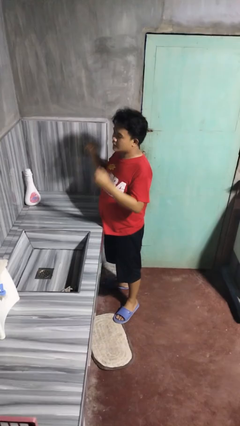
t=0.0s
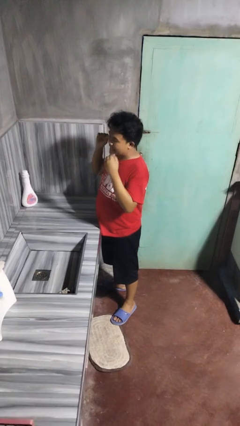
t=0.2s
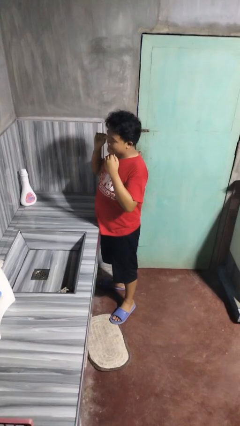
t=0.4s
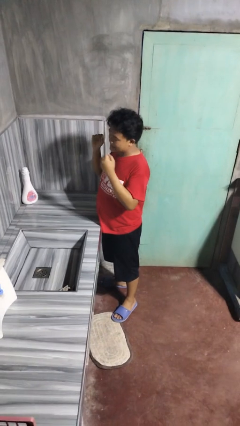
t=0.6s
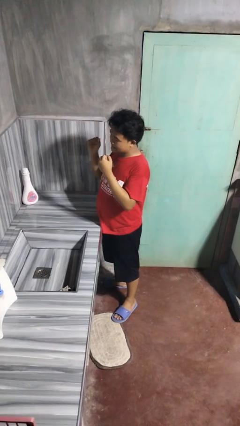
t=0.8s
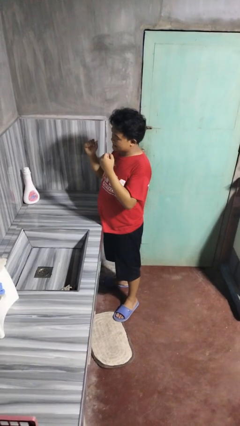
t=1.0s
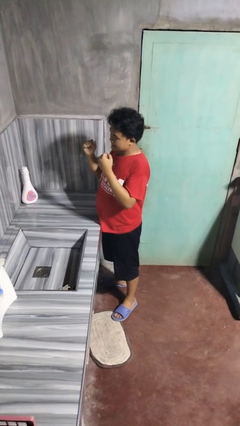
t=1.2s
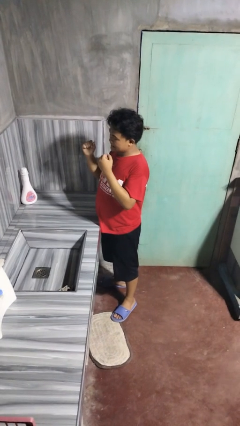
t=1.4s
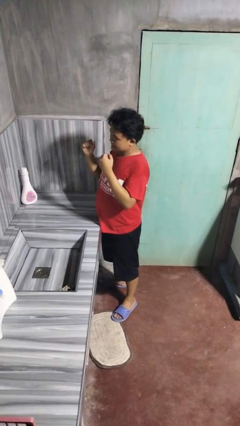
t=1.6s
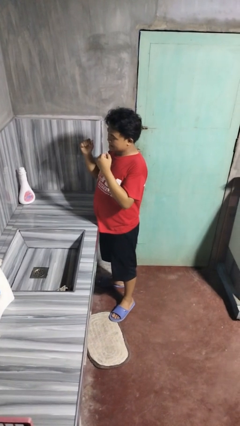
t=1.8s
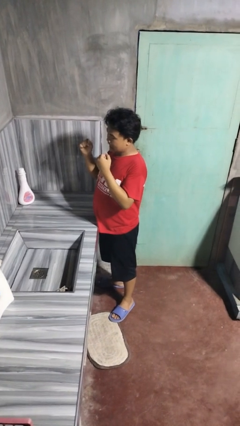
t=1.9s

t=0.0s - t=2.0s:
person flosses

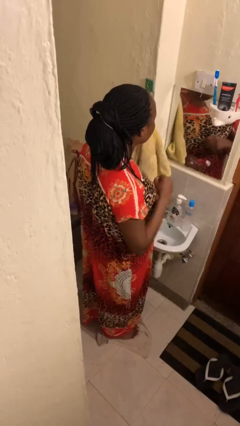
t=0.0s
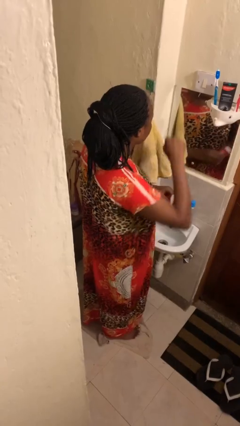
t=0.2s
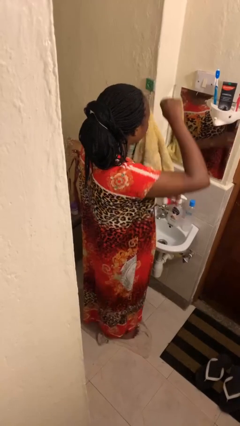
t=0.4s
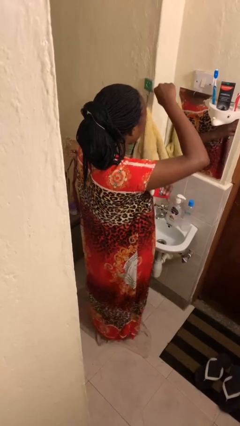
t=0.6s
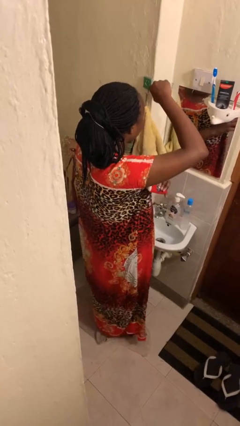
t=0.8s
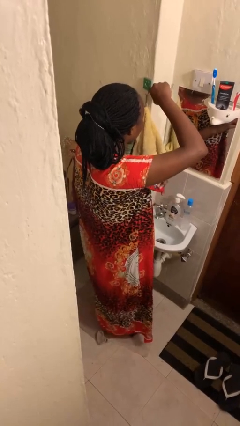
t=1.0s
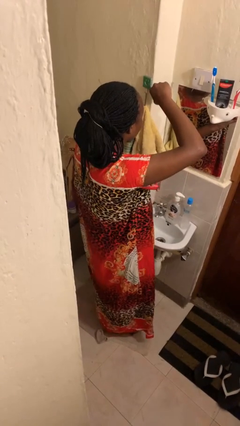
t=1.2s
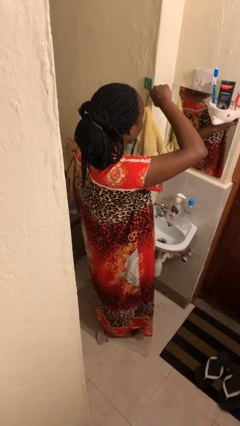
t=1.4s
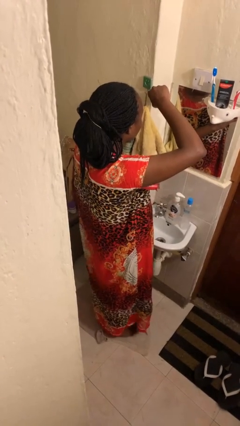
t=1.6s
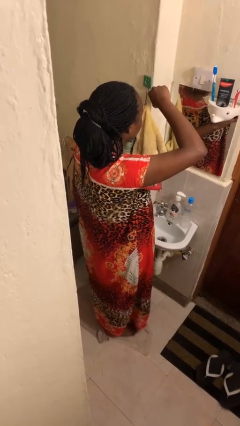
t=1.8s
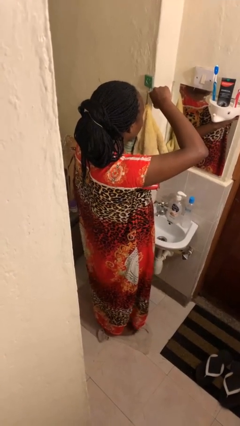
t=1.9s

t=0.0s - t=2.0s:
person applies deodorant

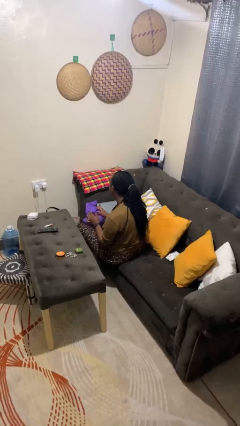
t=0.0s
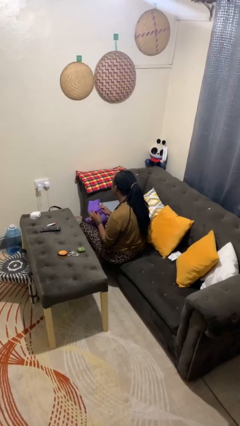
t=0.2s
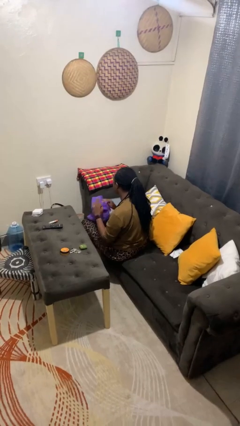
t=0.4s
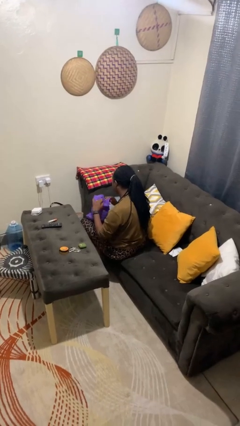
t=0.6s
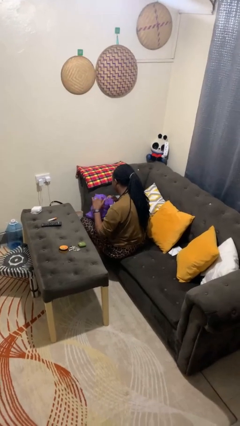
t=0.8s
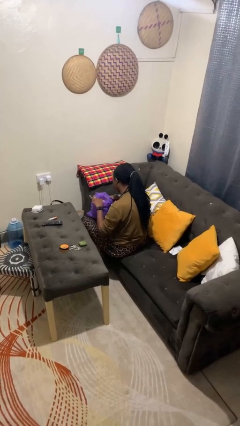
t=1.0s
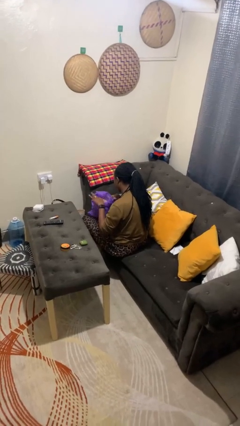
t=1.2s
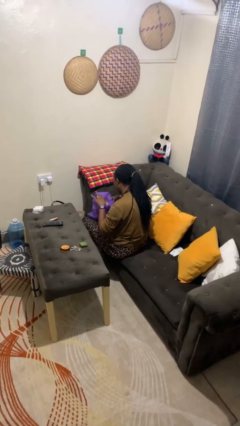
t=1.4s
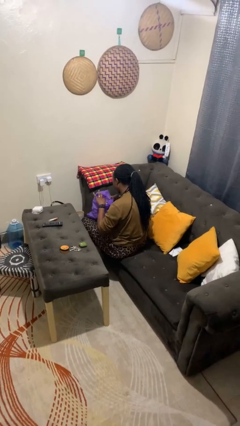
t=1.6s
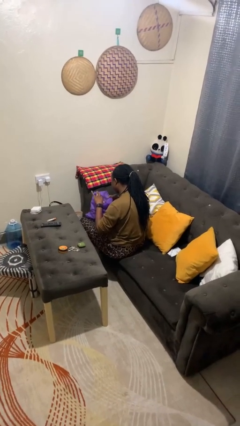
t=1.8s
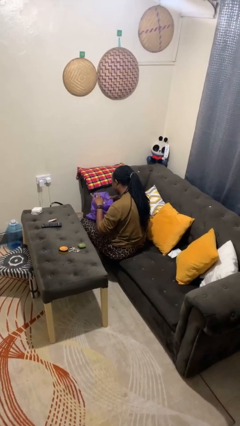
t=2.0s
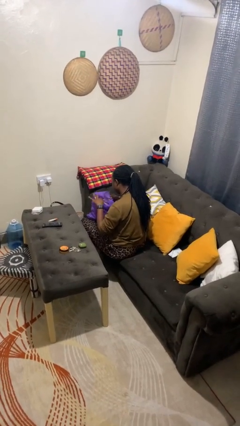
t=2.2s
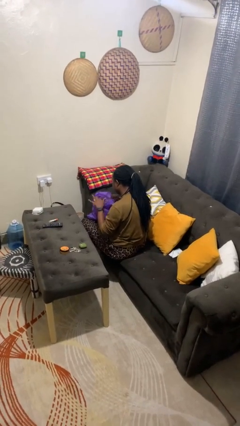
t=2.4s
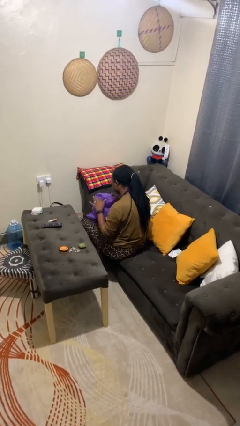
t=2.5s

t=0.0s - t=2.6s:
person searches in bag

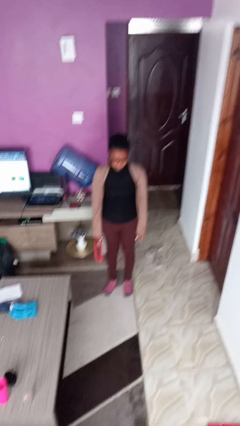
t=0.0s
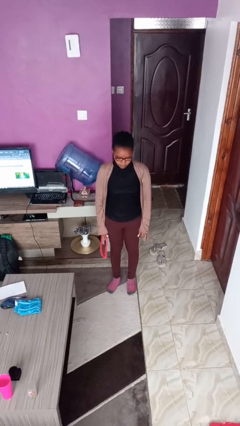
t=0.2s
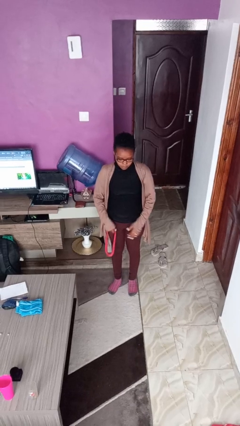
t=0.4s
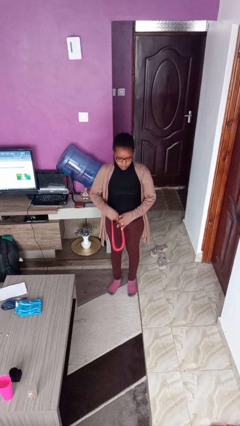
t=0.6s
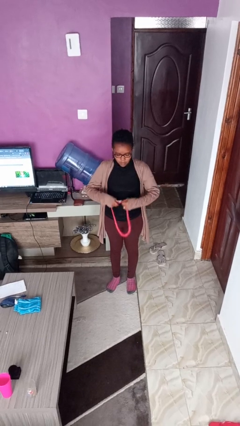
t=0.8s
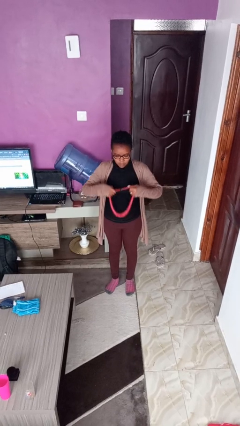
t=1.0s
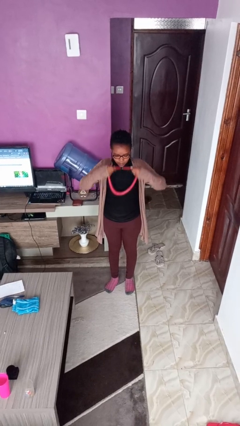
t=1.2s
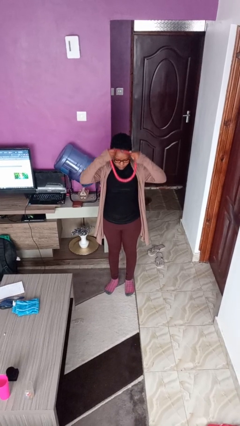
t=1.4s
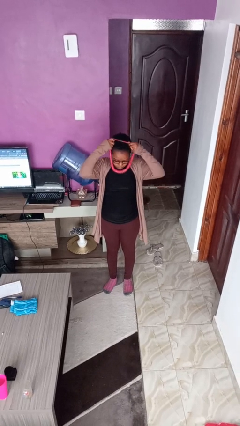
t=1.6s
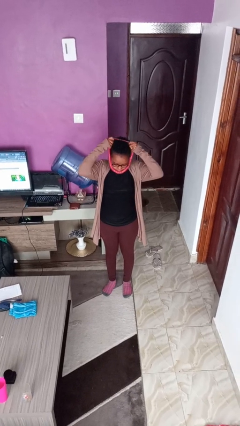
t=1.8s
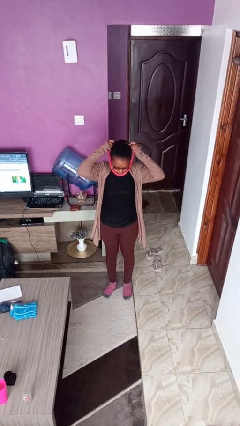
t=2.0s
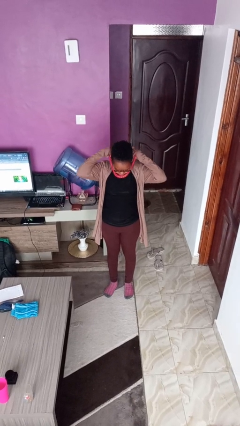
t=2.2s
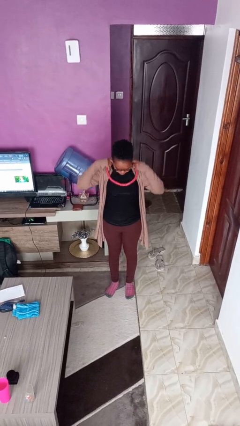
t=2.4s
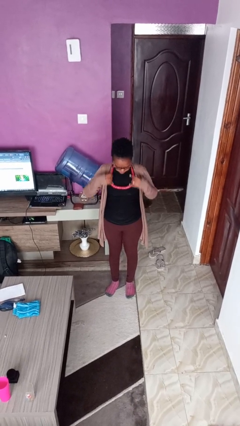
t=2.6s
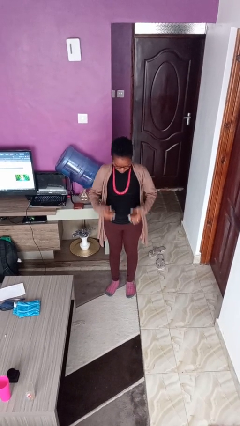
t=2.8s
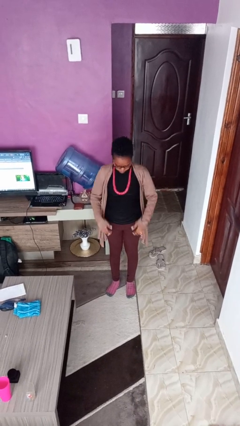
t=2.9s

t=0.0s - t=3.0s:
person puts on necklace

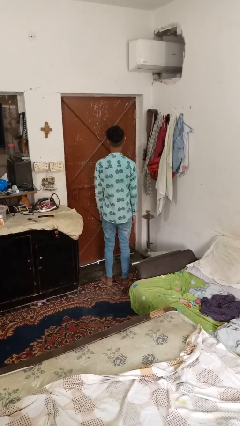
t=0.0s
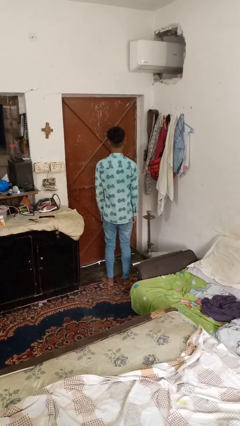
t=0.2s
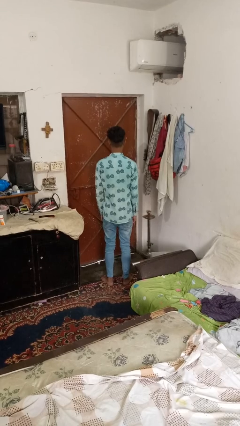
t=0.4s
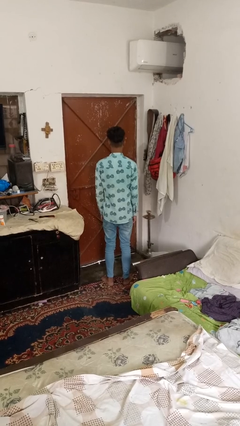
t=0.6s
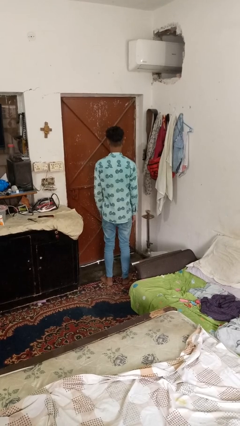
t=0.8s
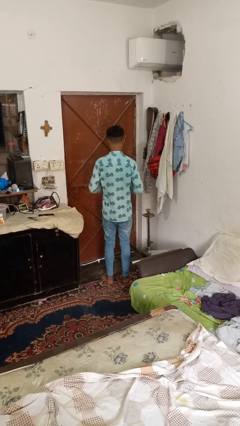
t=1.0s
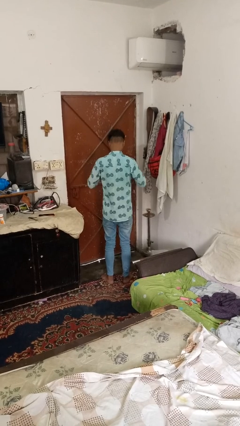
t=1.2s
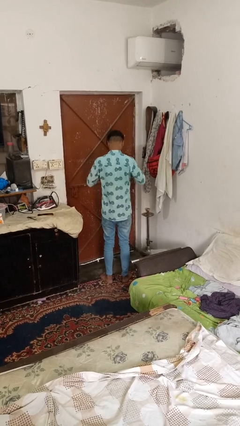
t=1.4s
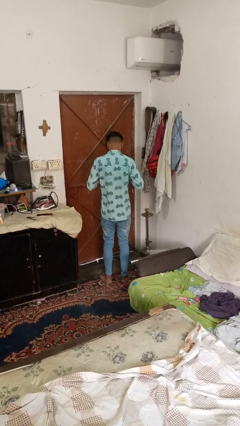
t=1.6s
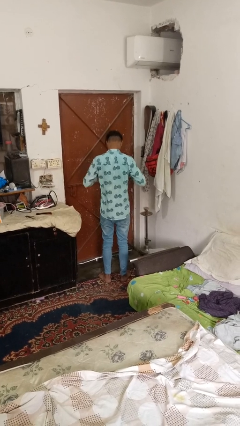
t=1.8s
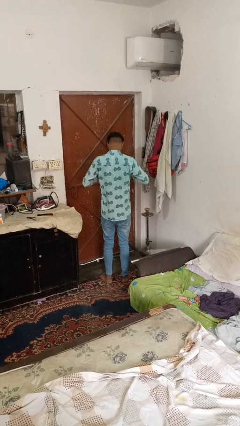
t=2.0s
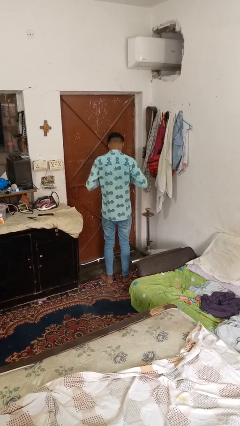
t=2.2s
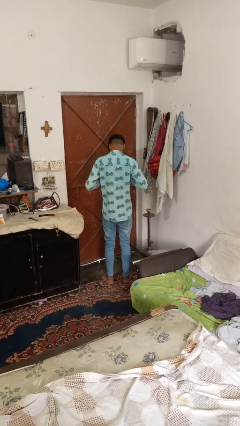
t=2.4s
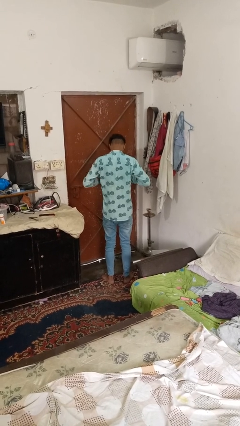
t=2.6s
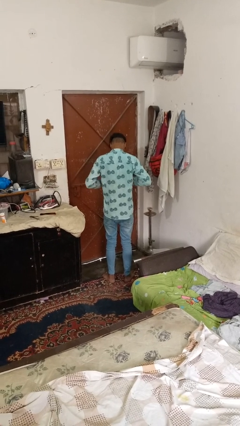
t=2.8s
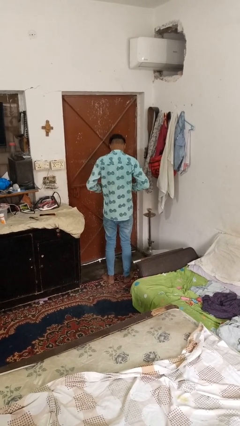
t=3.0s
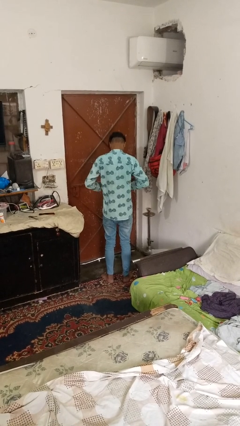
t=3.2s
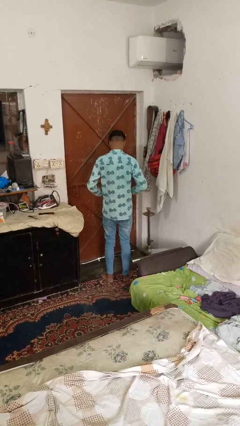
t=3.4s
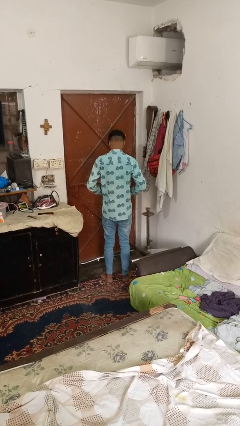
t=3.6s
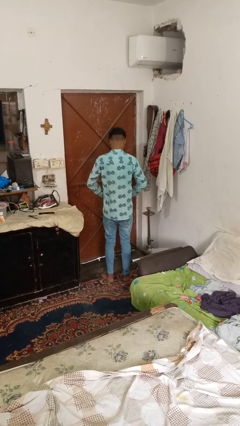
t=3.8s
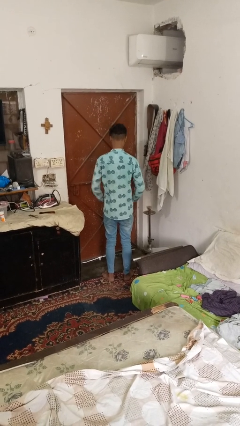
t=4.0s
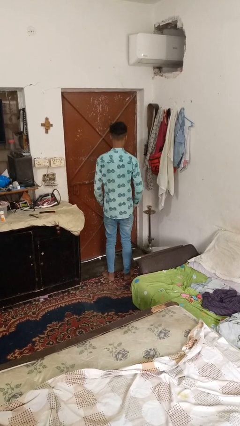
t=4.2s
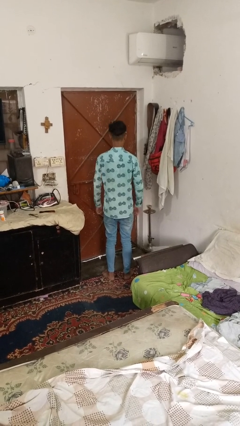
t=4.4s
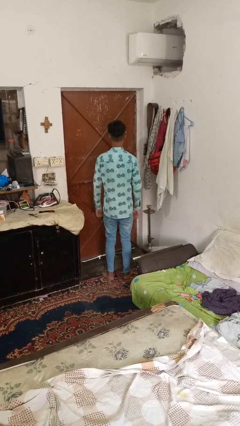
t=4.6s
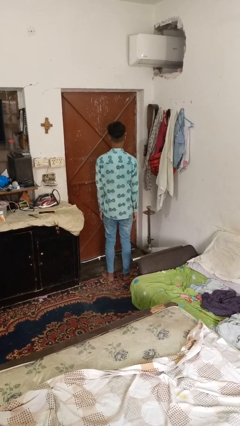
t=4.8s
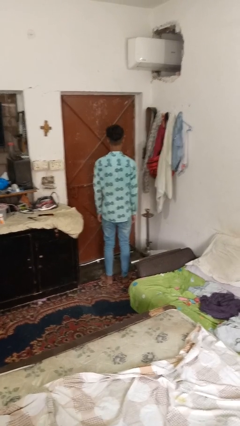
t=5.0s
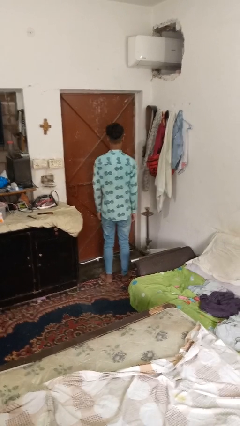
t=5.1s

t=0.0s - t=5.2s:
person unbuttons shirt

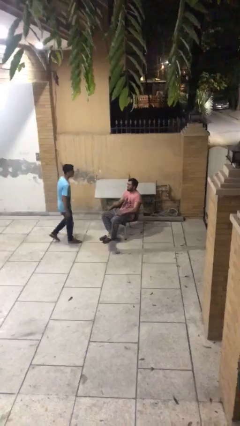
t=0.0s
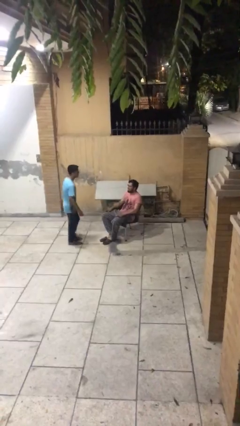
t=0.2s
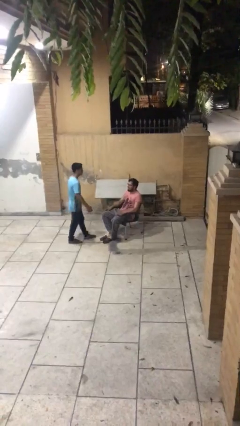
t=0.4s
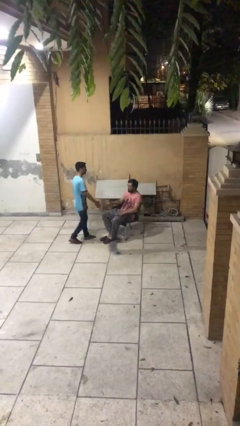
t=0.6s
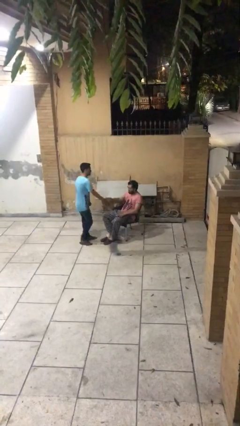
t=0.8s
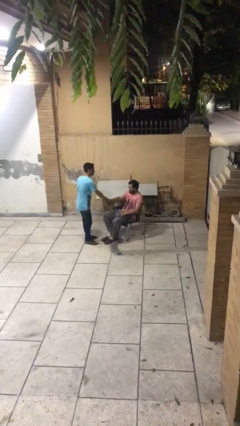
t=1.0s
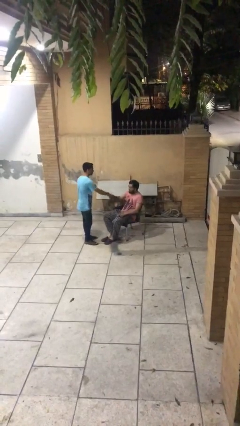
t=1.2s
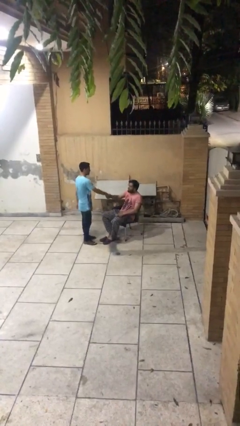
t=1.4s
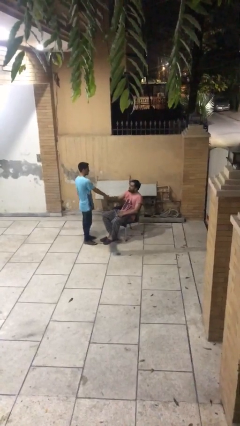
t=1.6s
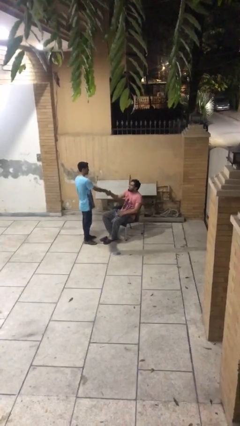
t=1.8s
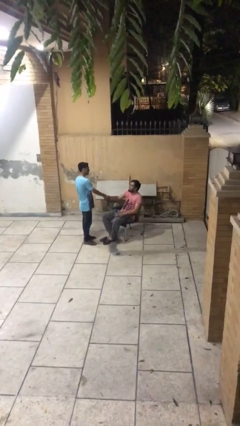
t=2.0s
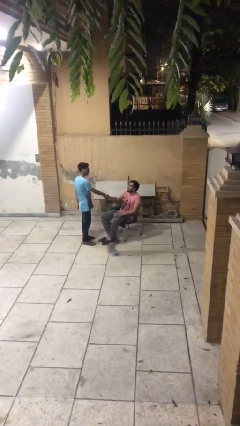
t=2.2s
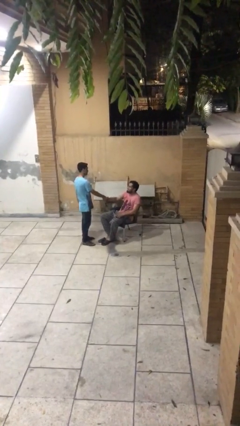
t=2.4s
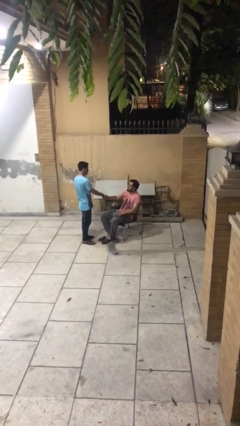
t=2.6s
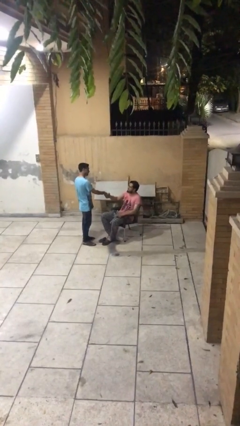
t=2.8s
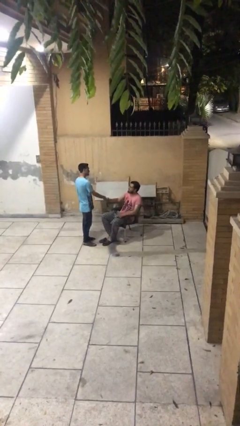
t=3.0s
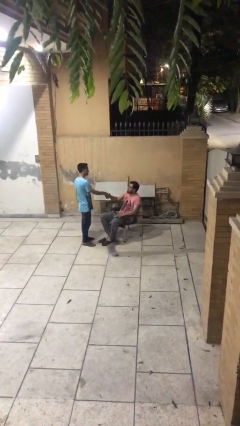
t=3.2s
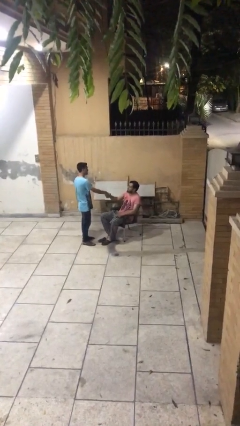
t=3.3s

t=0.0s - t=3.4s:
person shakes hand
